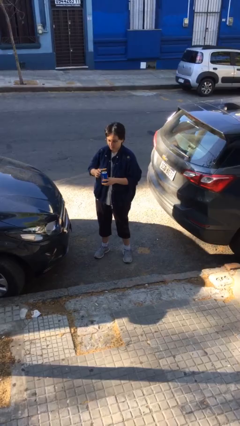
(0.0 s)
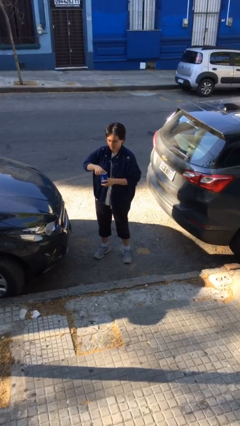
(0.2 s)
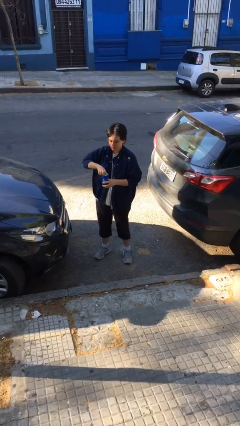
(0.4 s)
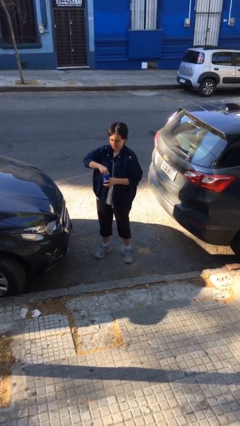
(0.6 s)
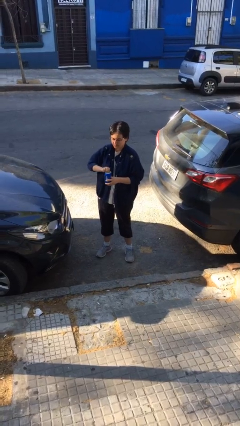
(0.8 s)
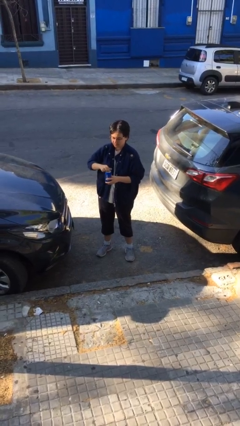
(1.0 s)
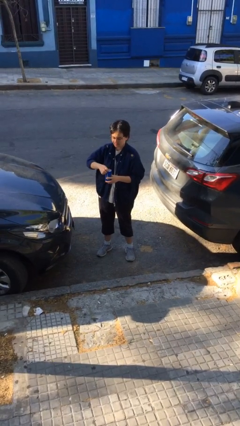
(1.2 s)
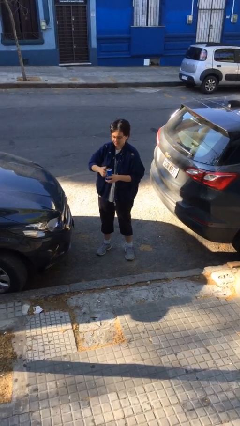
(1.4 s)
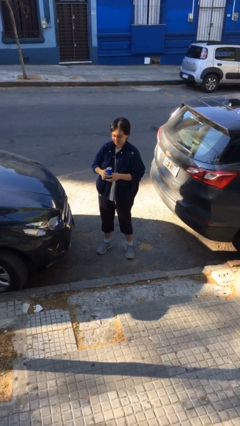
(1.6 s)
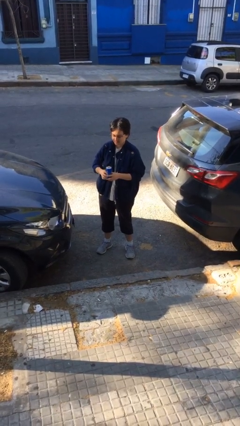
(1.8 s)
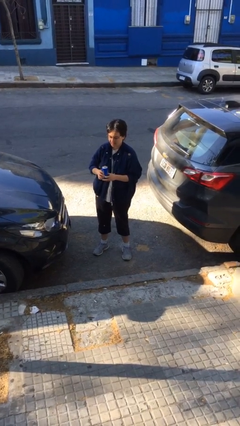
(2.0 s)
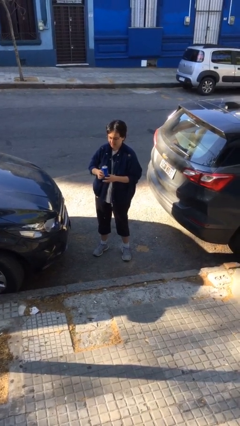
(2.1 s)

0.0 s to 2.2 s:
person opens beverage can

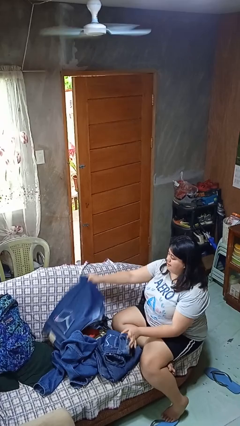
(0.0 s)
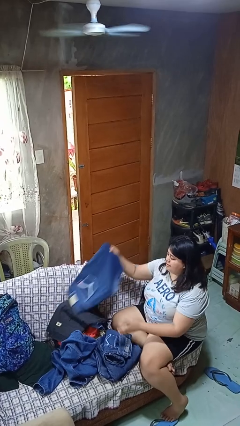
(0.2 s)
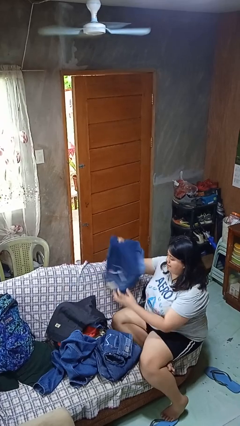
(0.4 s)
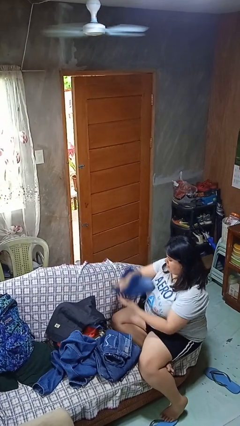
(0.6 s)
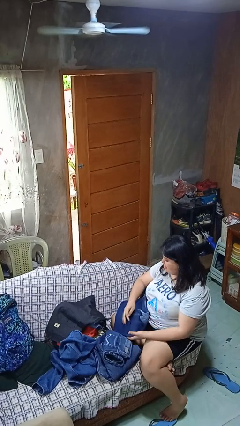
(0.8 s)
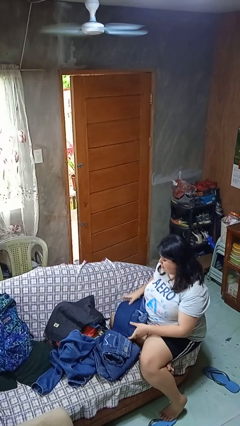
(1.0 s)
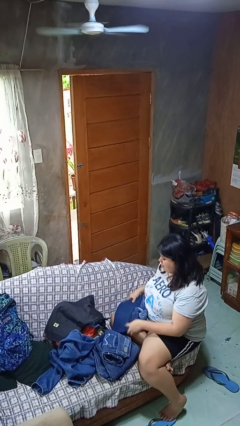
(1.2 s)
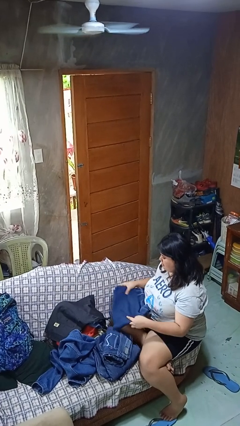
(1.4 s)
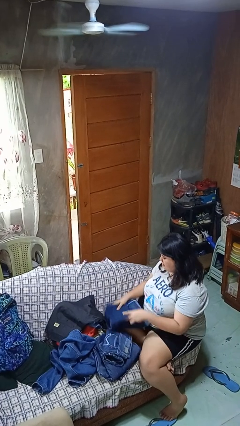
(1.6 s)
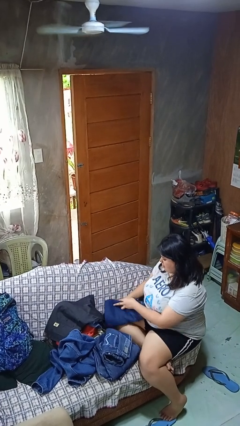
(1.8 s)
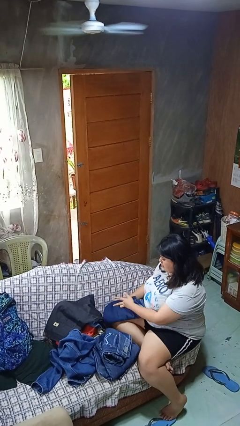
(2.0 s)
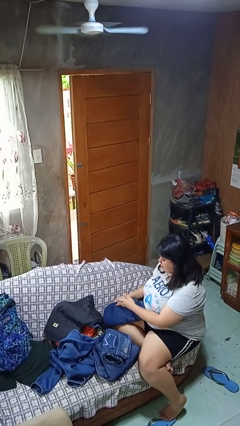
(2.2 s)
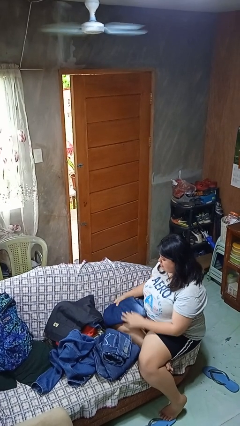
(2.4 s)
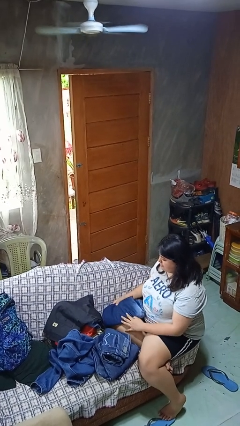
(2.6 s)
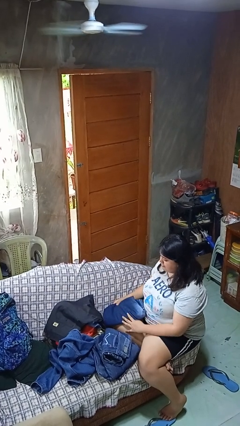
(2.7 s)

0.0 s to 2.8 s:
person folds pants

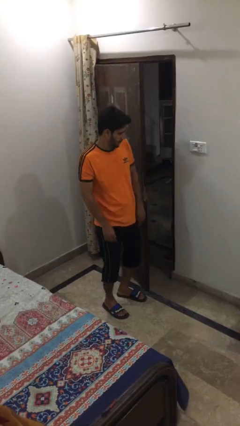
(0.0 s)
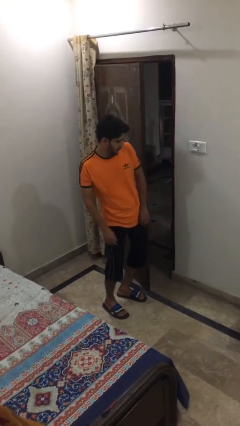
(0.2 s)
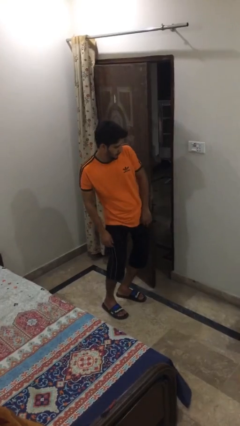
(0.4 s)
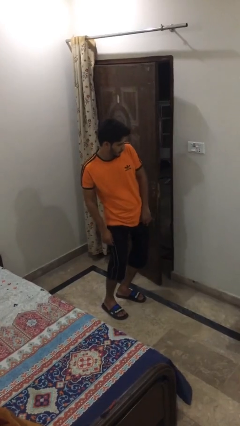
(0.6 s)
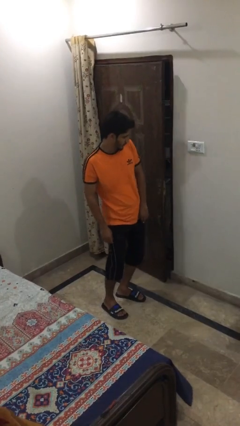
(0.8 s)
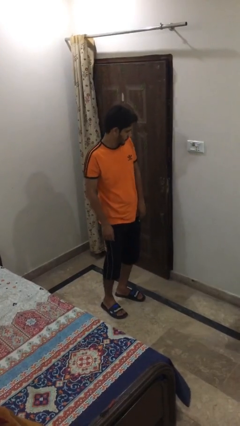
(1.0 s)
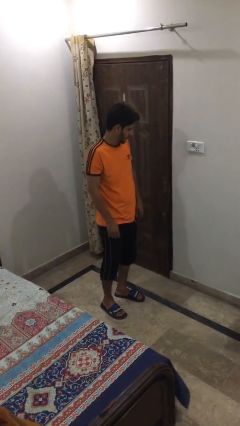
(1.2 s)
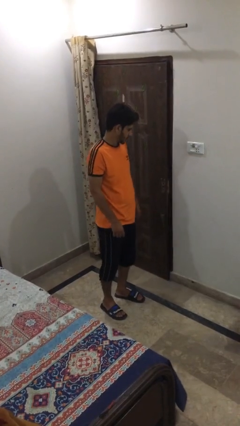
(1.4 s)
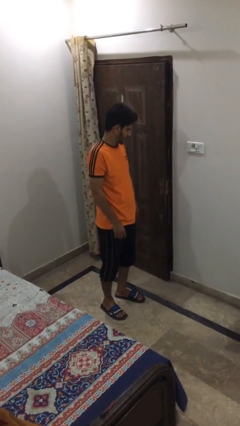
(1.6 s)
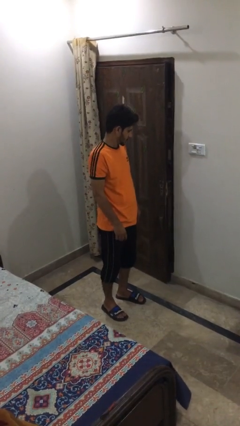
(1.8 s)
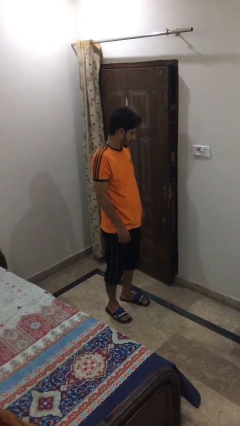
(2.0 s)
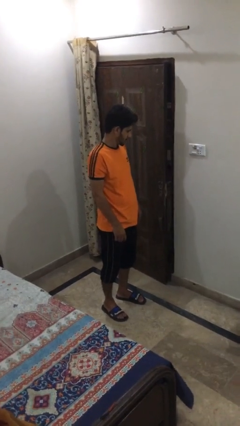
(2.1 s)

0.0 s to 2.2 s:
person closes door with hip

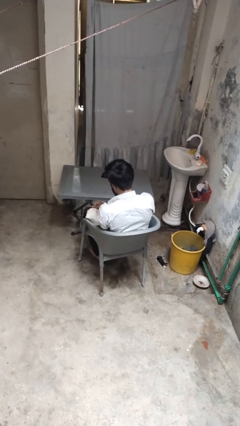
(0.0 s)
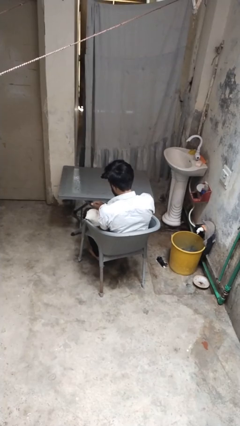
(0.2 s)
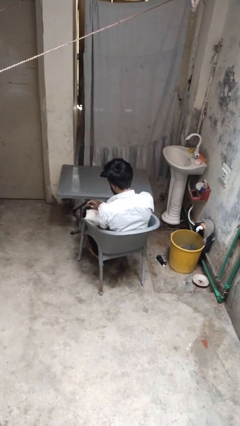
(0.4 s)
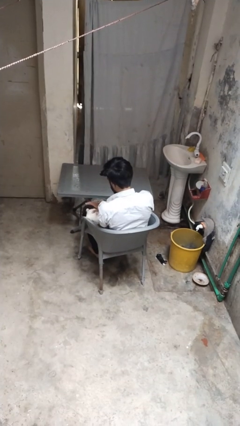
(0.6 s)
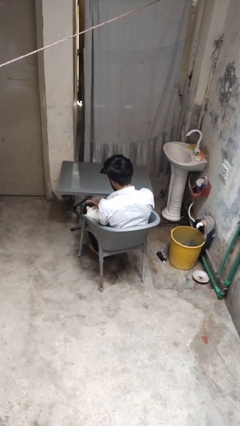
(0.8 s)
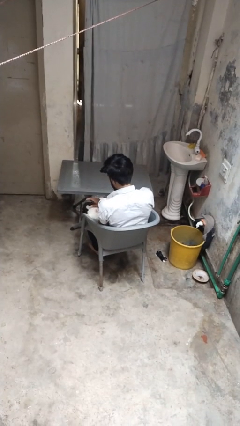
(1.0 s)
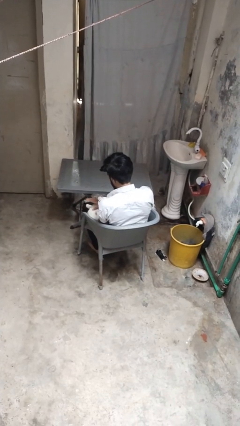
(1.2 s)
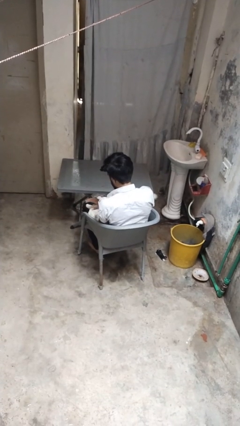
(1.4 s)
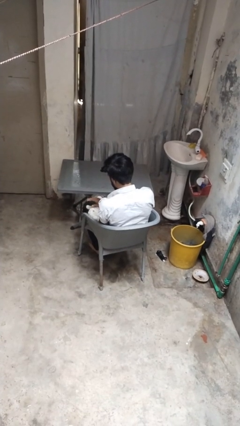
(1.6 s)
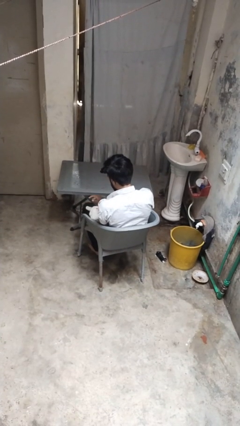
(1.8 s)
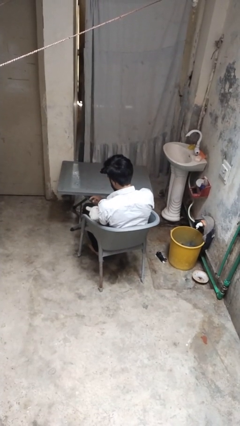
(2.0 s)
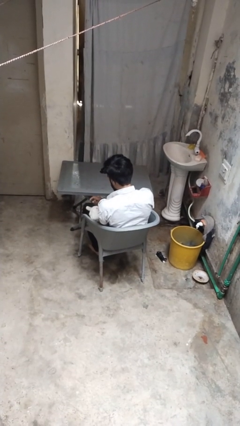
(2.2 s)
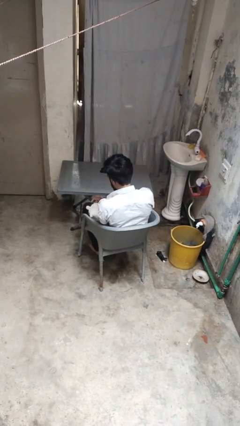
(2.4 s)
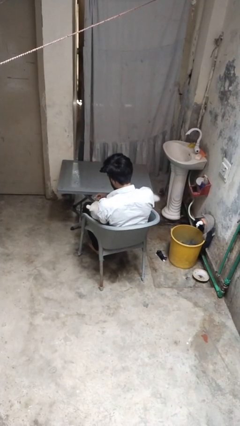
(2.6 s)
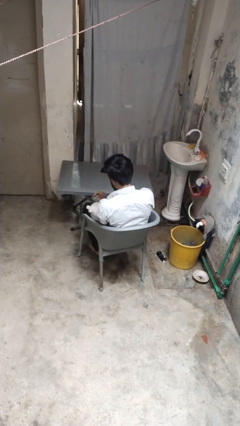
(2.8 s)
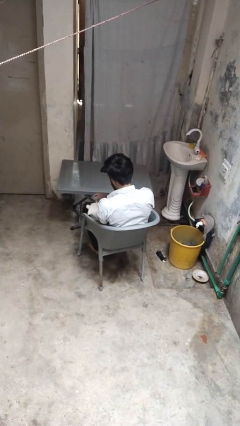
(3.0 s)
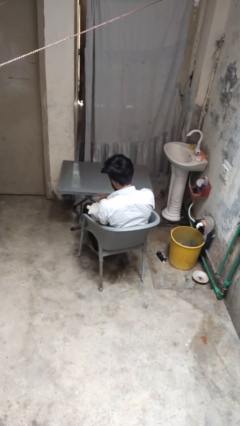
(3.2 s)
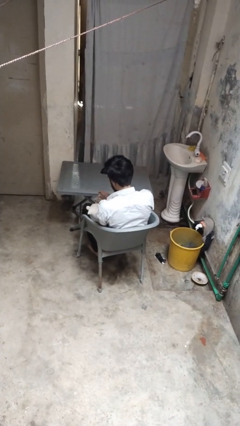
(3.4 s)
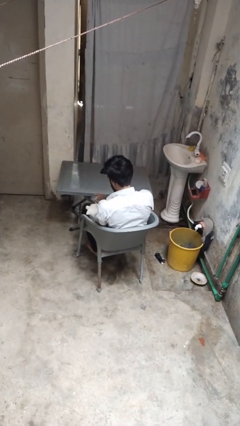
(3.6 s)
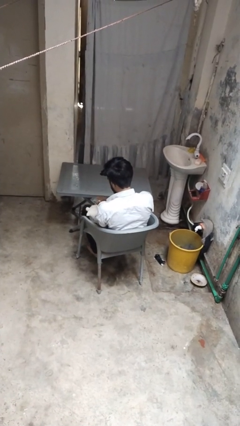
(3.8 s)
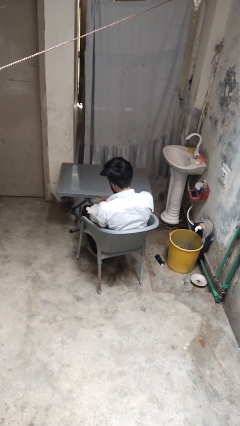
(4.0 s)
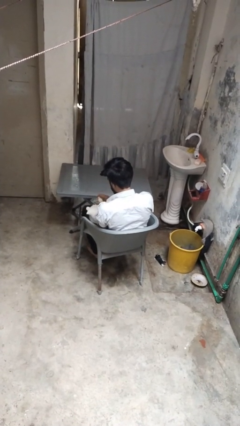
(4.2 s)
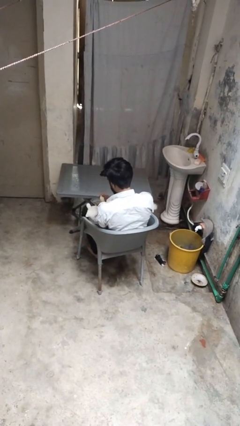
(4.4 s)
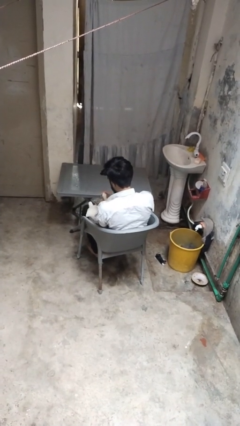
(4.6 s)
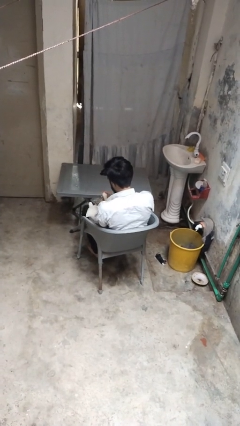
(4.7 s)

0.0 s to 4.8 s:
person pets cat

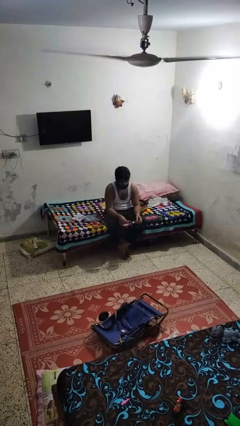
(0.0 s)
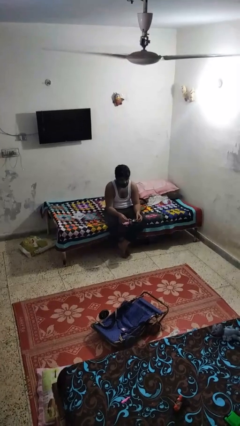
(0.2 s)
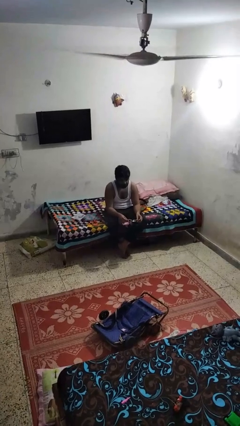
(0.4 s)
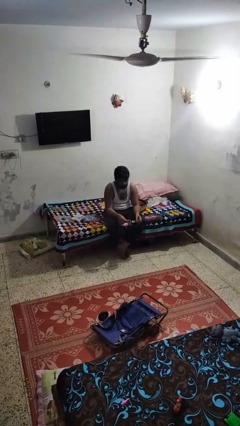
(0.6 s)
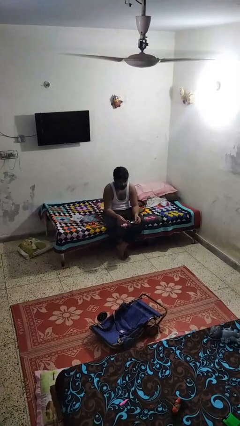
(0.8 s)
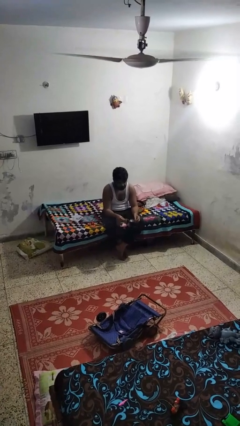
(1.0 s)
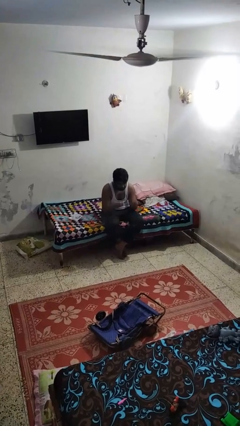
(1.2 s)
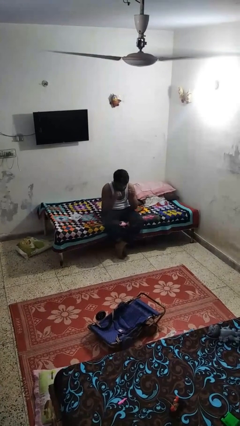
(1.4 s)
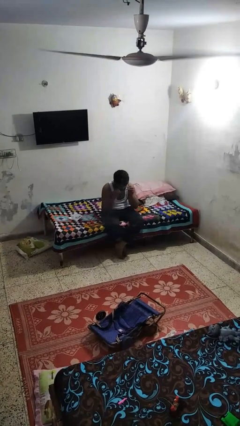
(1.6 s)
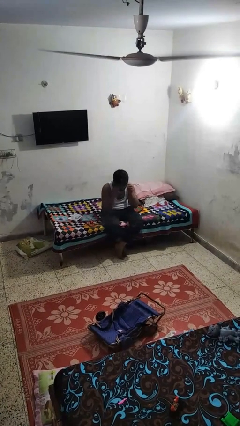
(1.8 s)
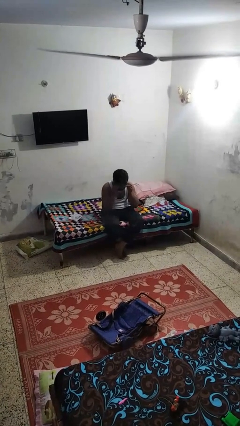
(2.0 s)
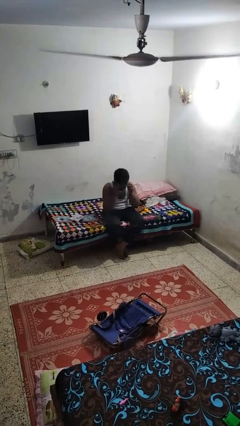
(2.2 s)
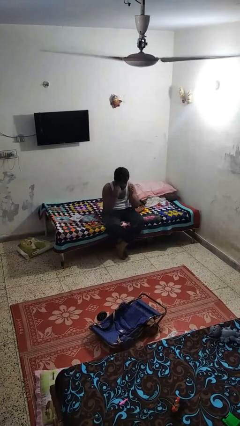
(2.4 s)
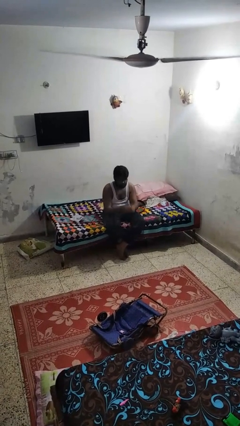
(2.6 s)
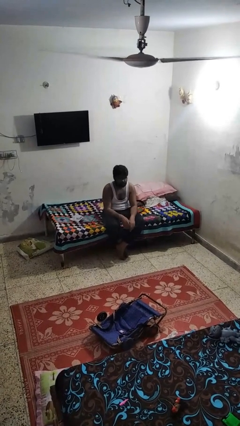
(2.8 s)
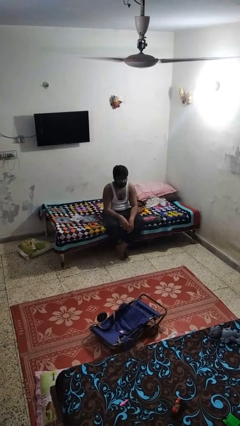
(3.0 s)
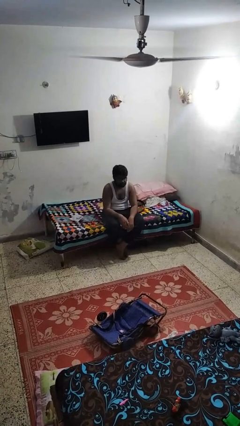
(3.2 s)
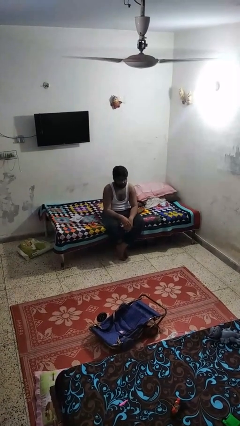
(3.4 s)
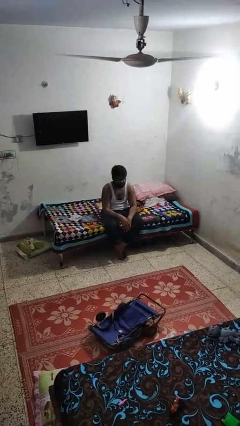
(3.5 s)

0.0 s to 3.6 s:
person puts on glasses

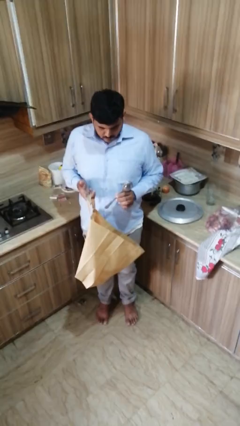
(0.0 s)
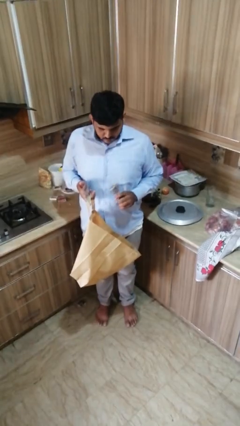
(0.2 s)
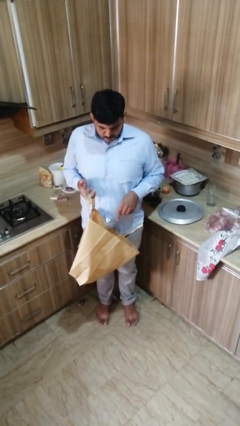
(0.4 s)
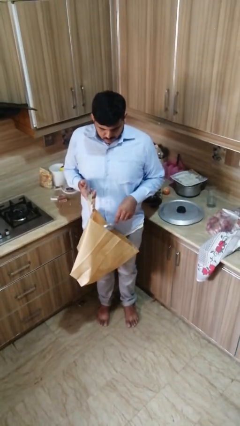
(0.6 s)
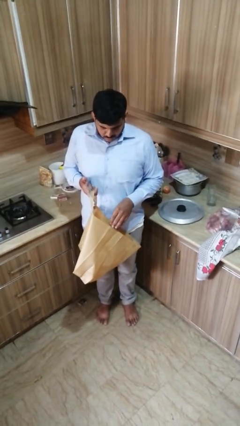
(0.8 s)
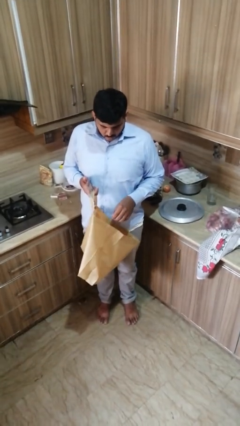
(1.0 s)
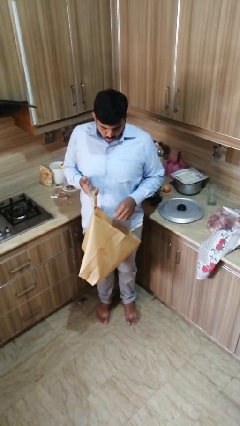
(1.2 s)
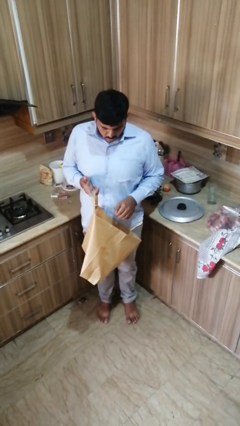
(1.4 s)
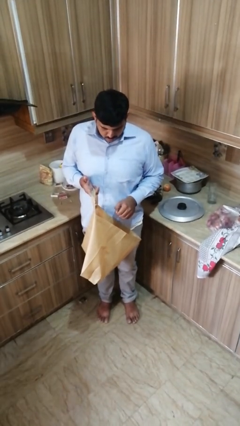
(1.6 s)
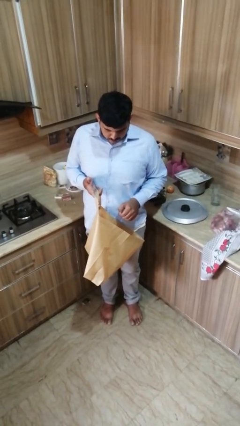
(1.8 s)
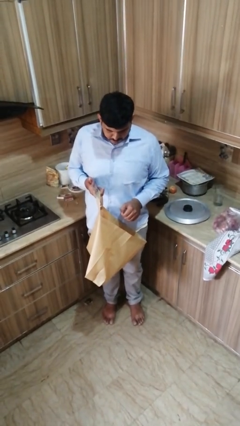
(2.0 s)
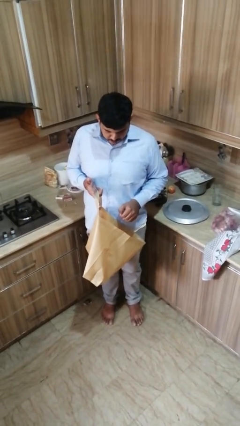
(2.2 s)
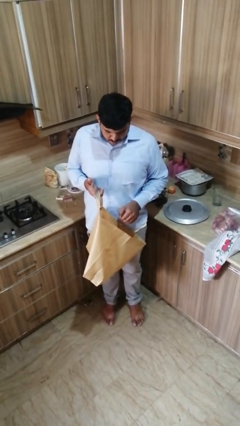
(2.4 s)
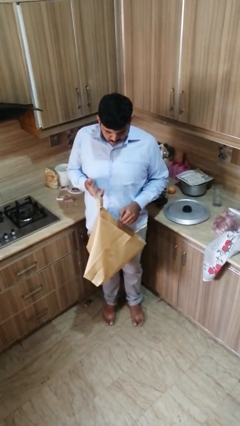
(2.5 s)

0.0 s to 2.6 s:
person puts object into bag
